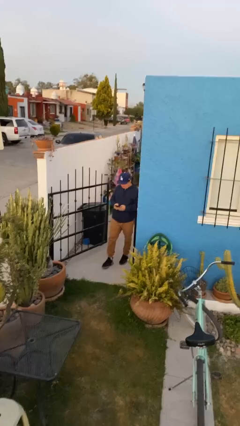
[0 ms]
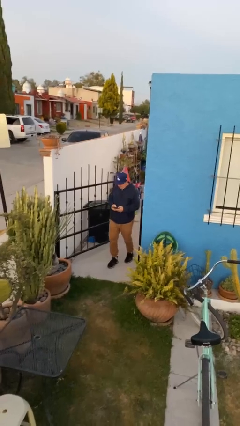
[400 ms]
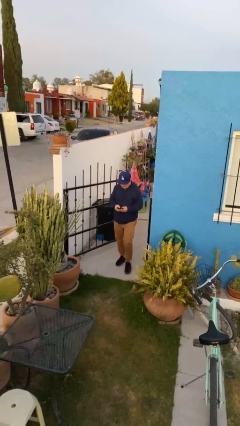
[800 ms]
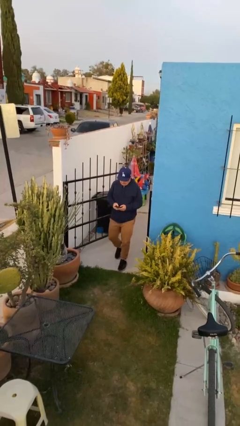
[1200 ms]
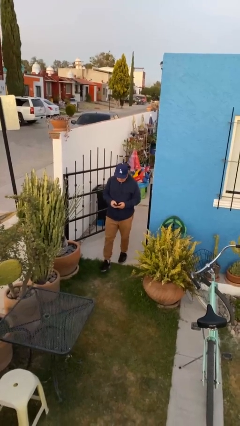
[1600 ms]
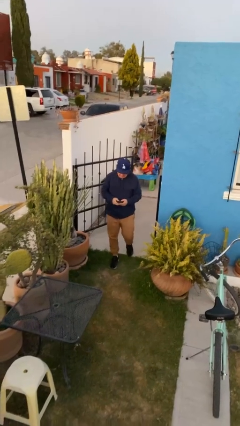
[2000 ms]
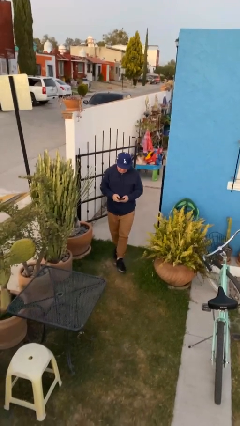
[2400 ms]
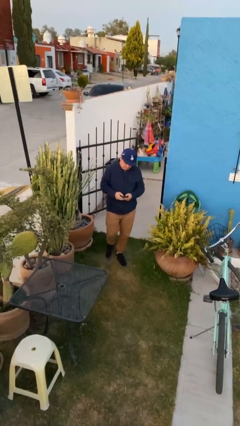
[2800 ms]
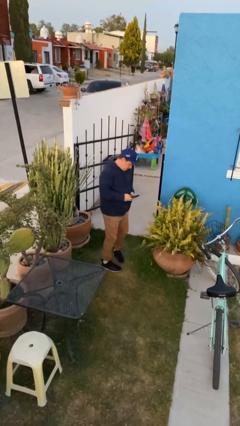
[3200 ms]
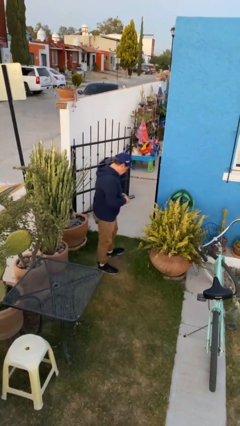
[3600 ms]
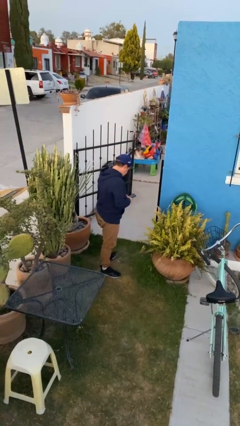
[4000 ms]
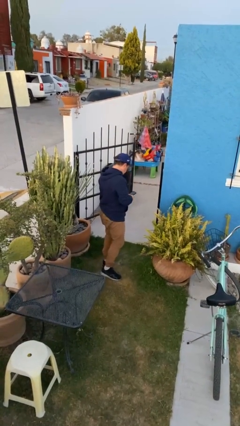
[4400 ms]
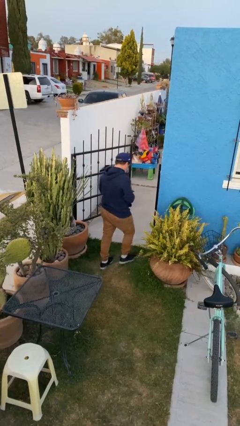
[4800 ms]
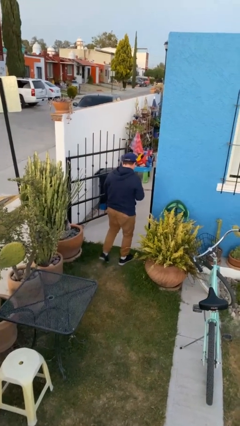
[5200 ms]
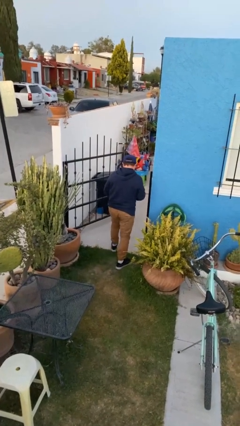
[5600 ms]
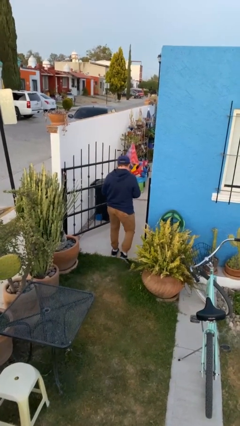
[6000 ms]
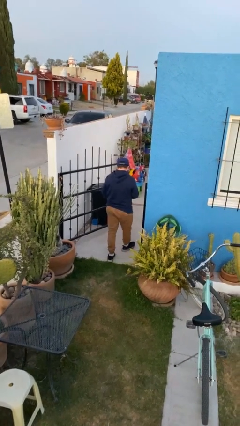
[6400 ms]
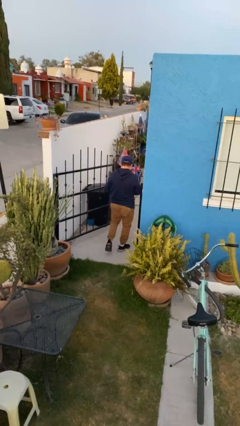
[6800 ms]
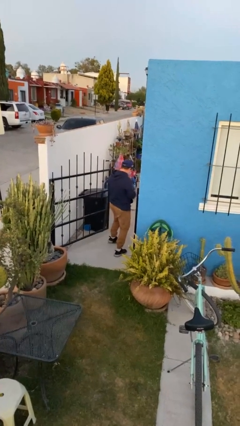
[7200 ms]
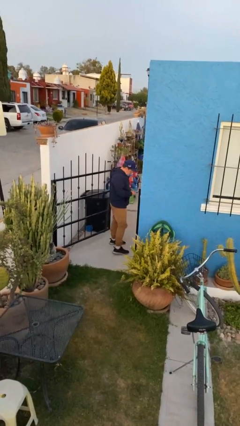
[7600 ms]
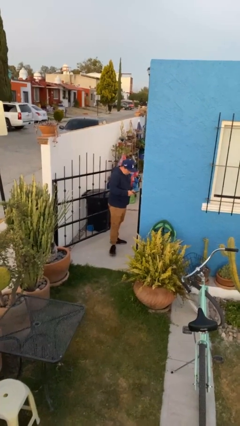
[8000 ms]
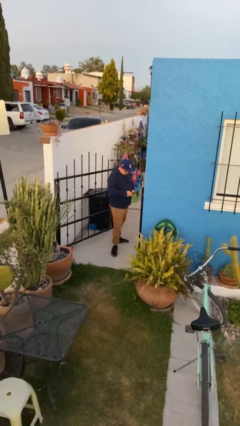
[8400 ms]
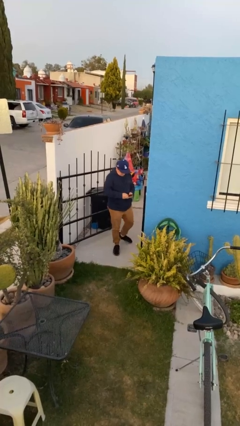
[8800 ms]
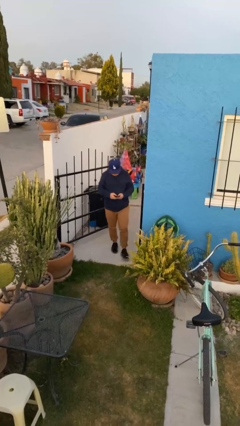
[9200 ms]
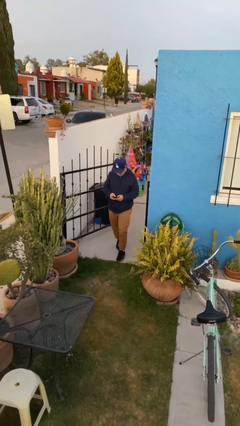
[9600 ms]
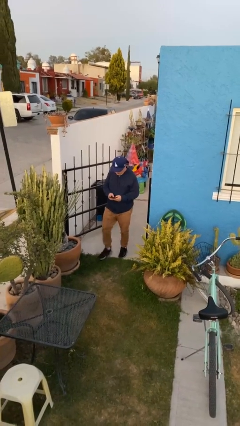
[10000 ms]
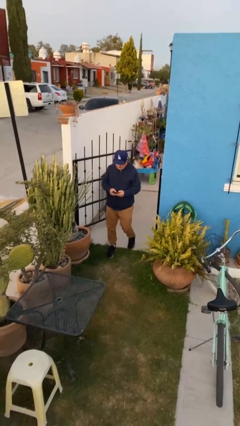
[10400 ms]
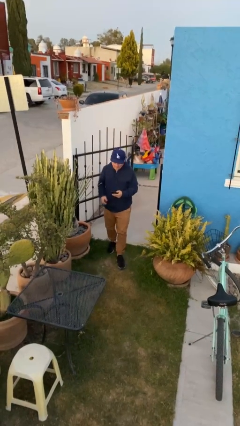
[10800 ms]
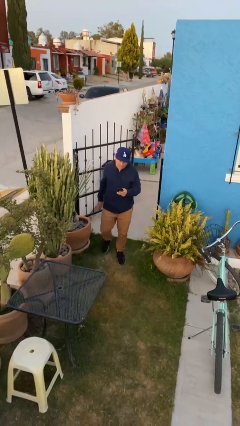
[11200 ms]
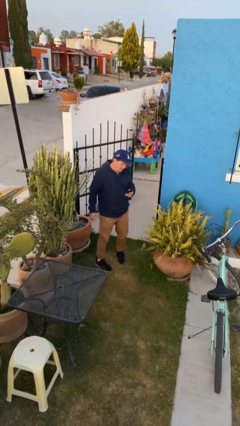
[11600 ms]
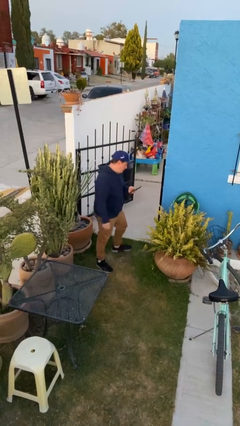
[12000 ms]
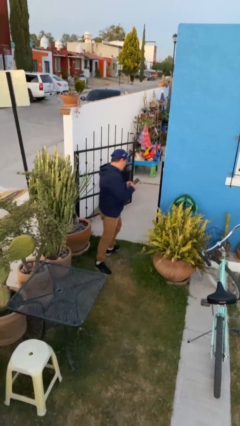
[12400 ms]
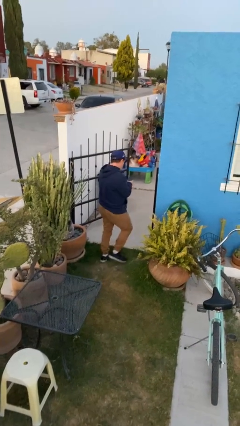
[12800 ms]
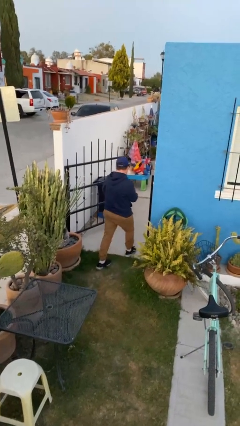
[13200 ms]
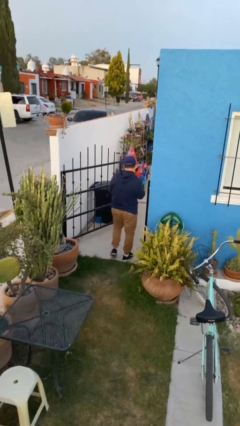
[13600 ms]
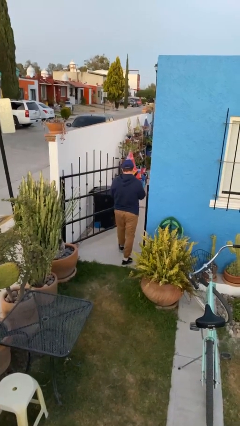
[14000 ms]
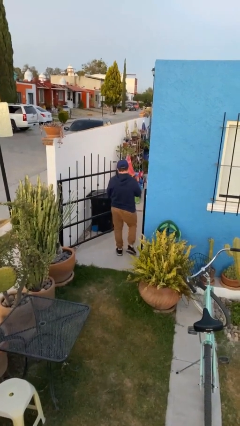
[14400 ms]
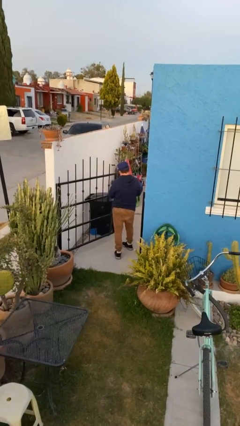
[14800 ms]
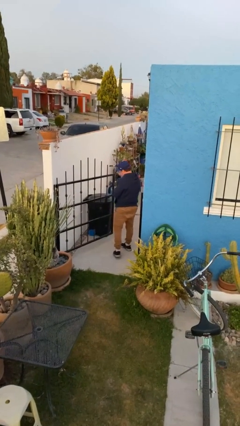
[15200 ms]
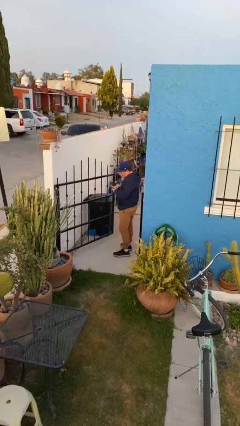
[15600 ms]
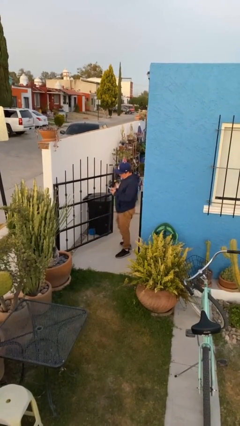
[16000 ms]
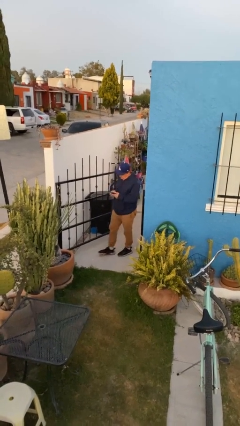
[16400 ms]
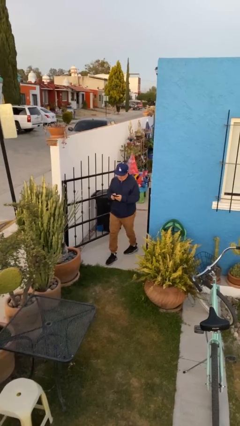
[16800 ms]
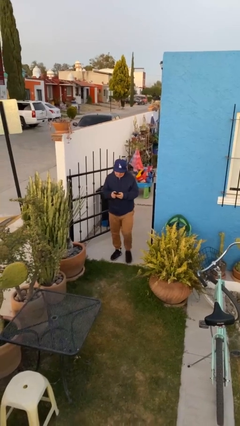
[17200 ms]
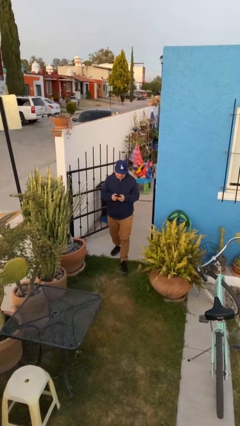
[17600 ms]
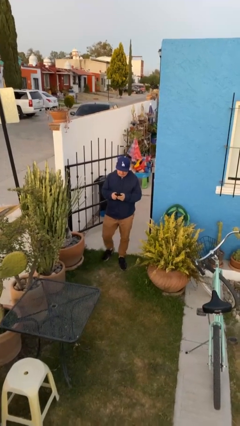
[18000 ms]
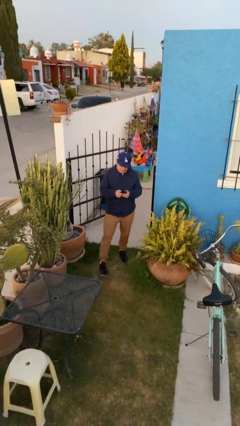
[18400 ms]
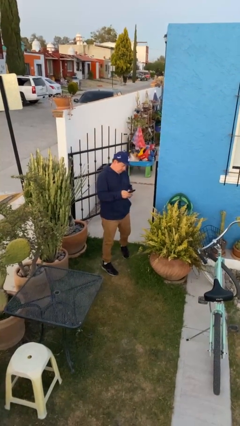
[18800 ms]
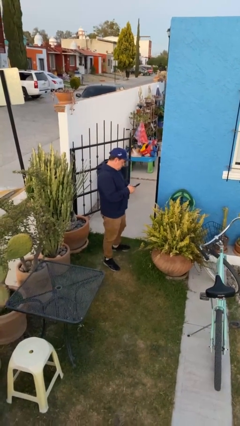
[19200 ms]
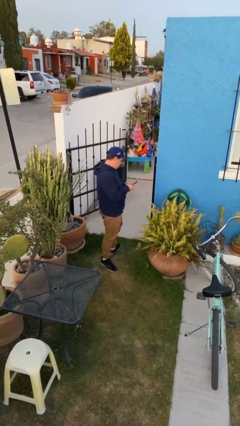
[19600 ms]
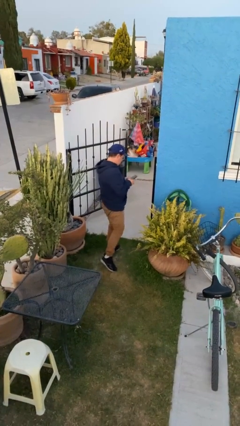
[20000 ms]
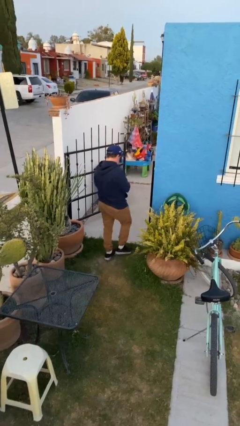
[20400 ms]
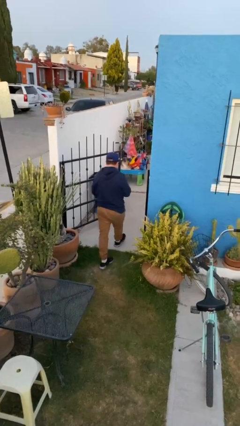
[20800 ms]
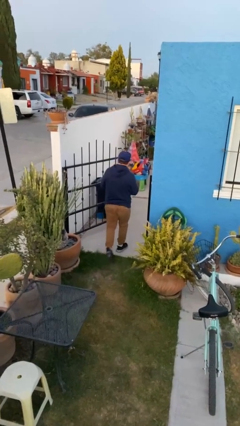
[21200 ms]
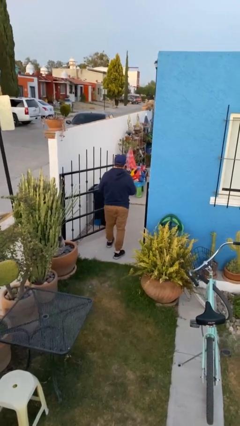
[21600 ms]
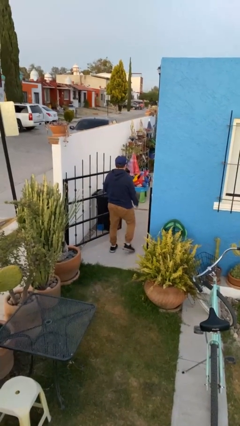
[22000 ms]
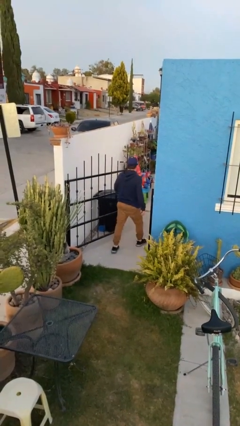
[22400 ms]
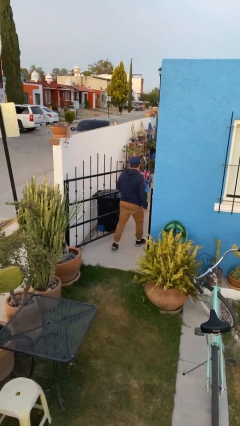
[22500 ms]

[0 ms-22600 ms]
person texts on phone

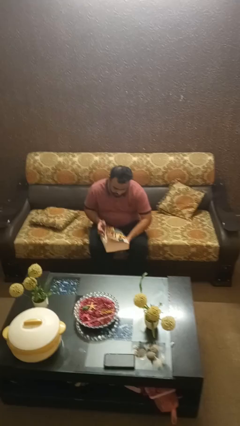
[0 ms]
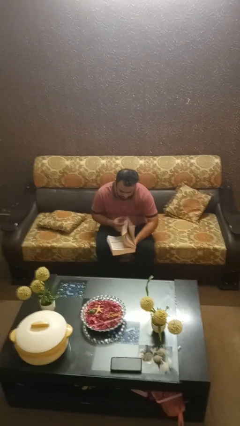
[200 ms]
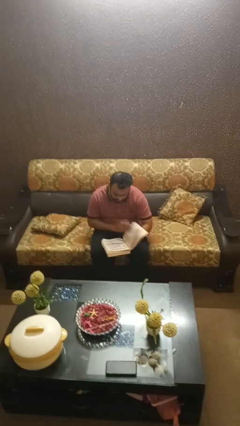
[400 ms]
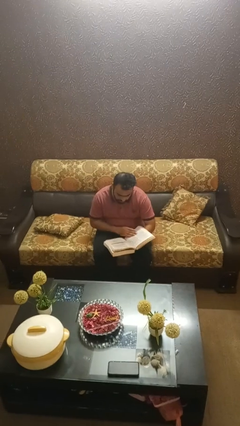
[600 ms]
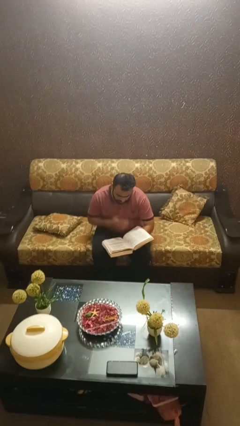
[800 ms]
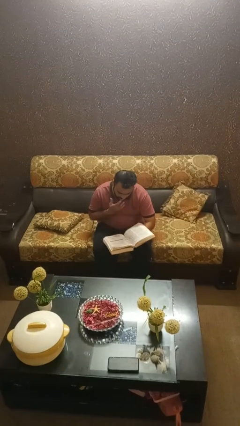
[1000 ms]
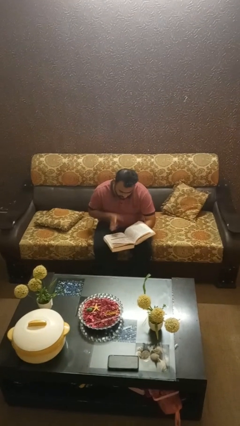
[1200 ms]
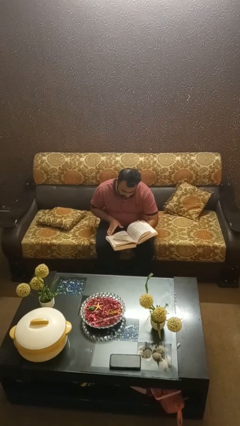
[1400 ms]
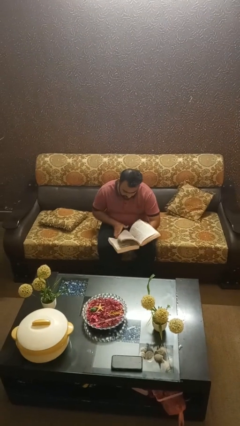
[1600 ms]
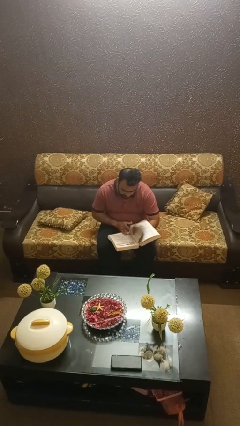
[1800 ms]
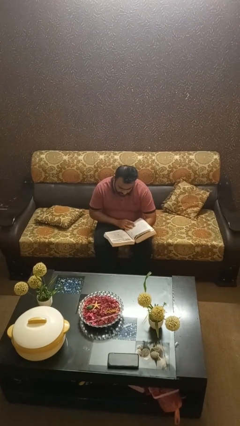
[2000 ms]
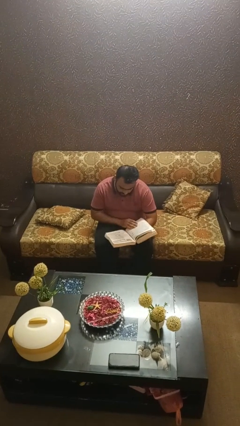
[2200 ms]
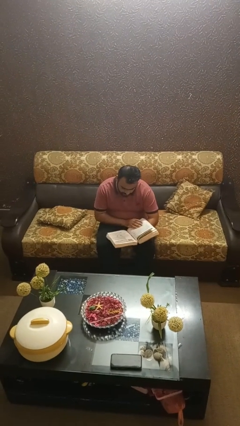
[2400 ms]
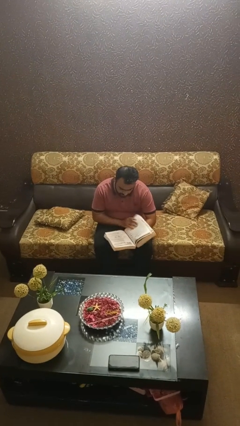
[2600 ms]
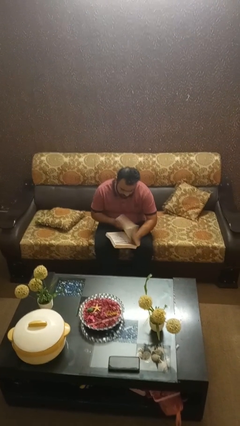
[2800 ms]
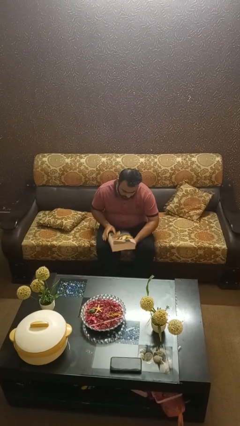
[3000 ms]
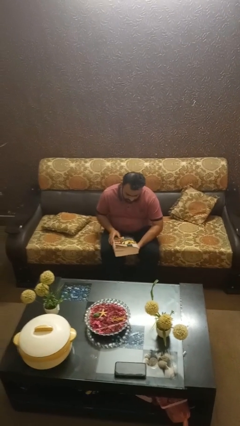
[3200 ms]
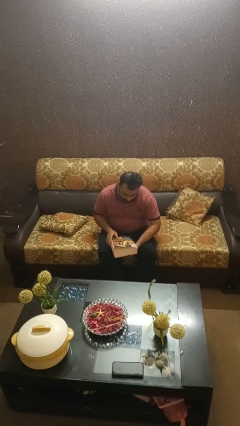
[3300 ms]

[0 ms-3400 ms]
person reads book

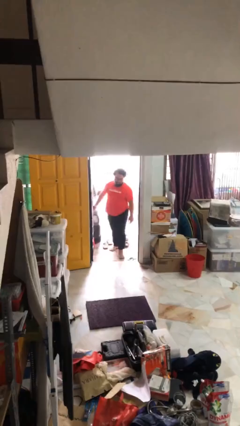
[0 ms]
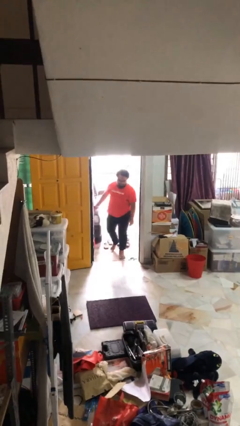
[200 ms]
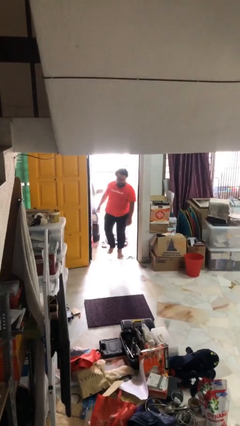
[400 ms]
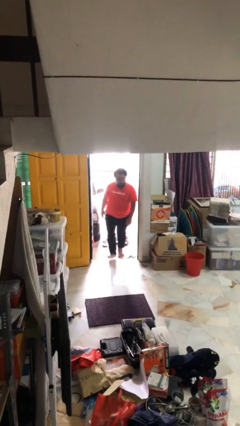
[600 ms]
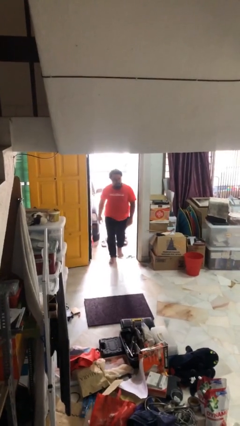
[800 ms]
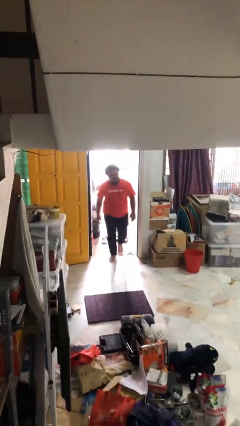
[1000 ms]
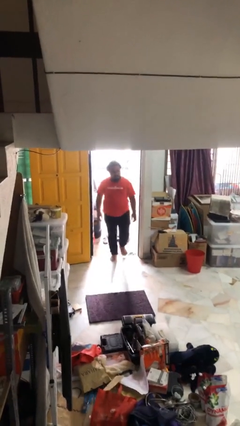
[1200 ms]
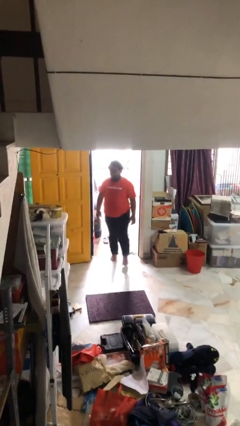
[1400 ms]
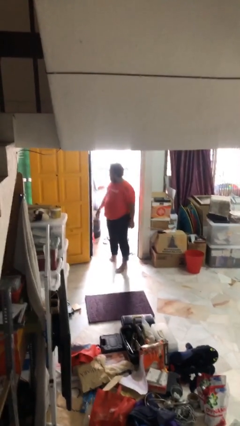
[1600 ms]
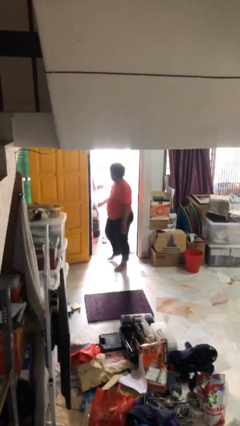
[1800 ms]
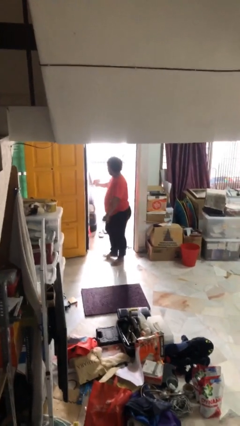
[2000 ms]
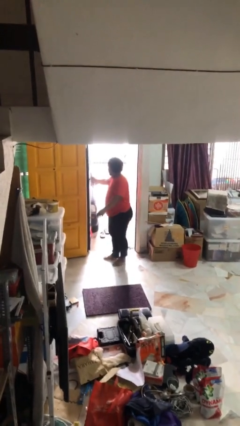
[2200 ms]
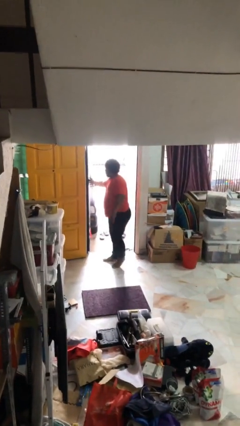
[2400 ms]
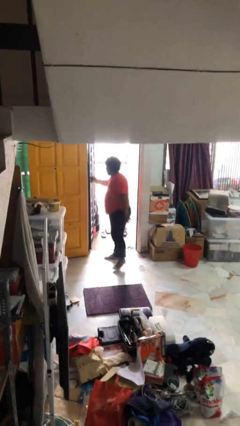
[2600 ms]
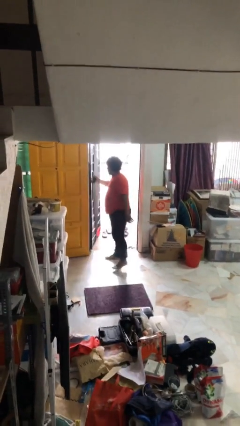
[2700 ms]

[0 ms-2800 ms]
person enters scene through structure

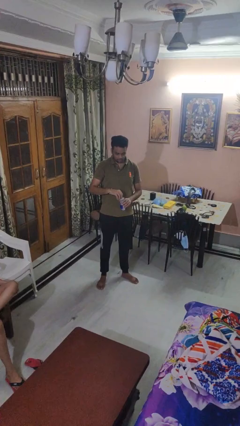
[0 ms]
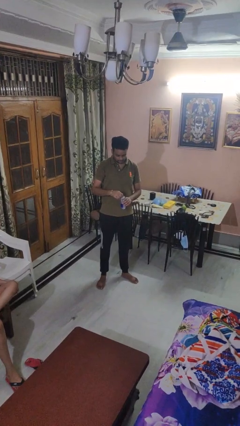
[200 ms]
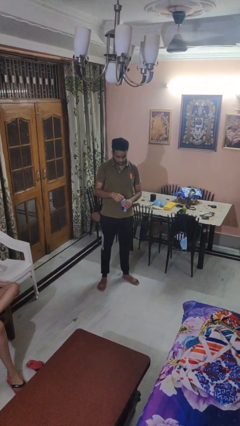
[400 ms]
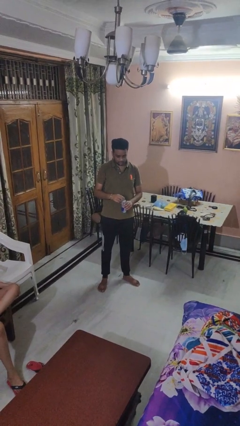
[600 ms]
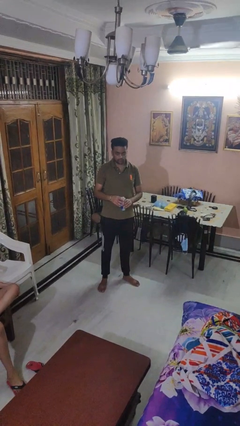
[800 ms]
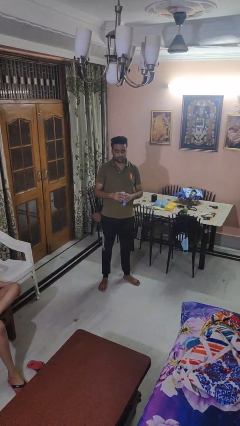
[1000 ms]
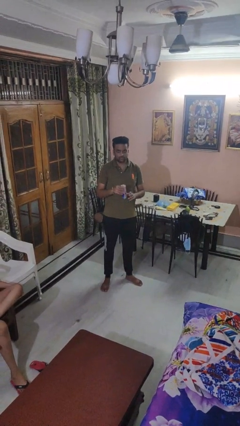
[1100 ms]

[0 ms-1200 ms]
person opens beverage can
